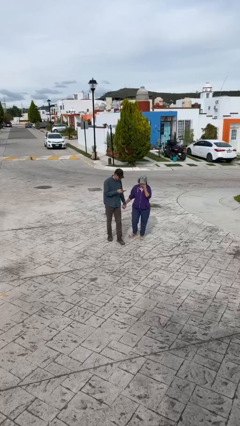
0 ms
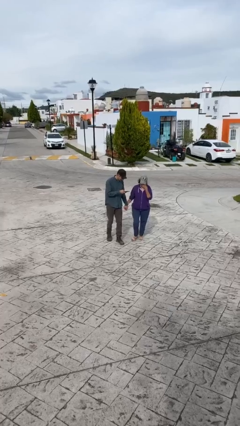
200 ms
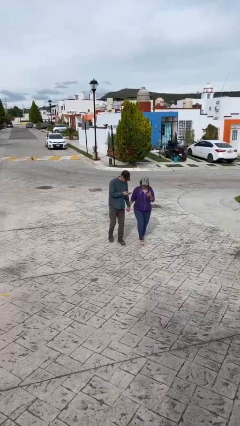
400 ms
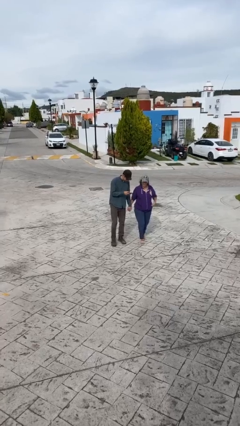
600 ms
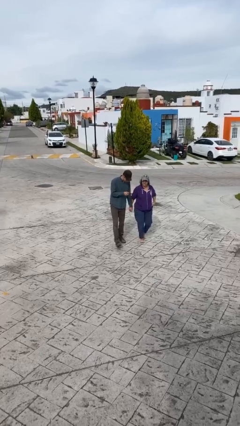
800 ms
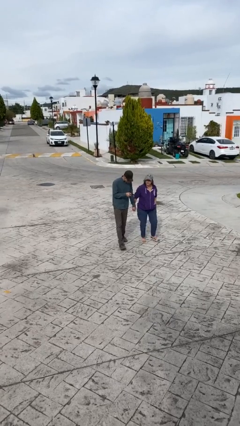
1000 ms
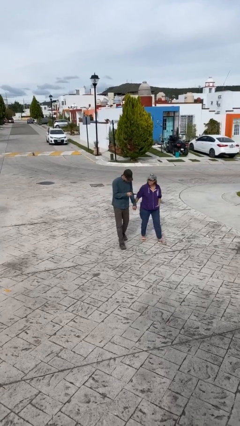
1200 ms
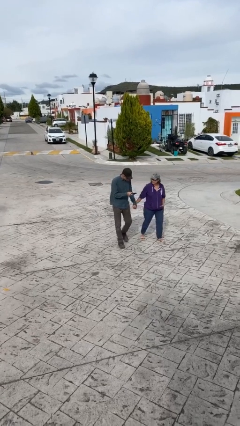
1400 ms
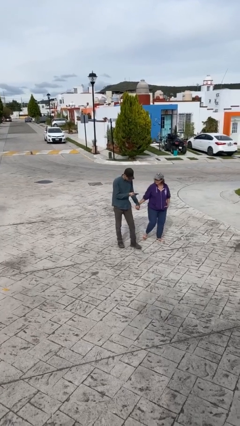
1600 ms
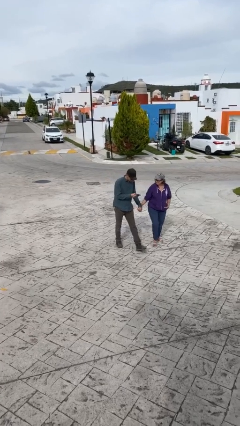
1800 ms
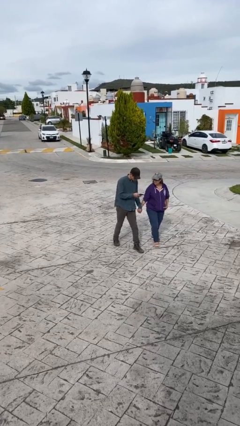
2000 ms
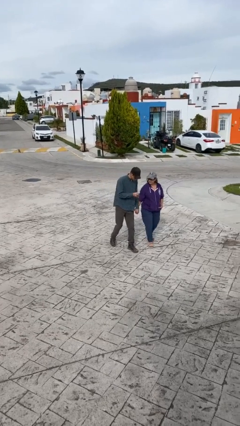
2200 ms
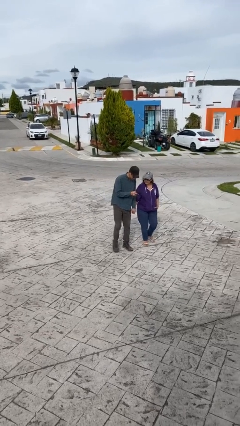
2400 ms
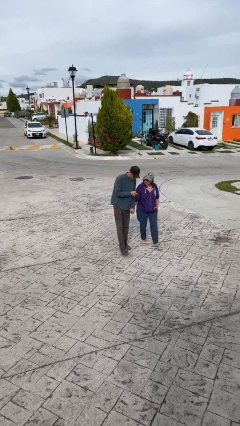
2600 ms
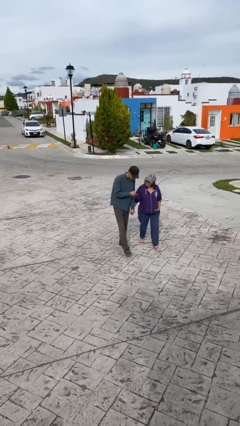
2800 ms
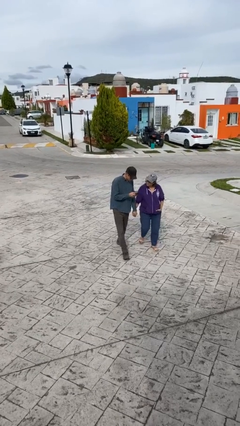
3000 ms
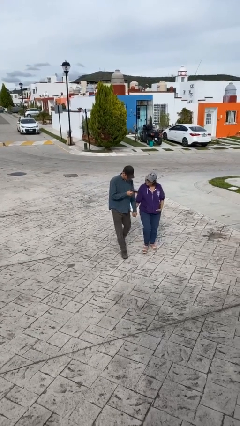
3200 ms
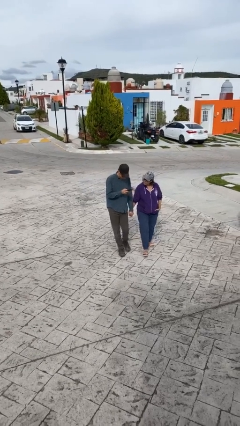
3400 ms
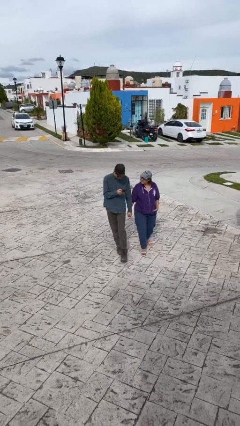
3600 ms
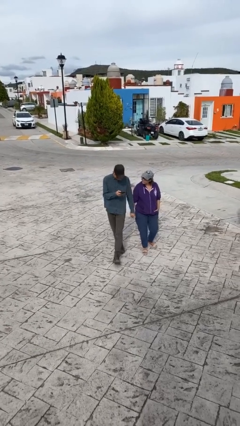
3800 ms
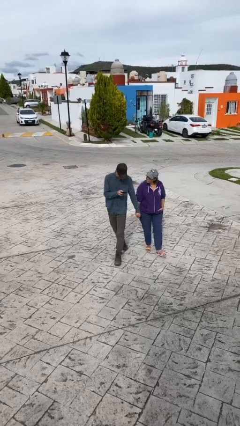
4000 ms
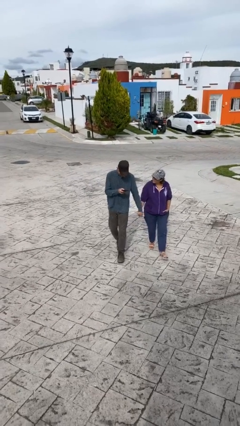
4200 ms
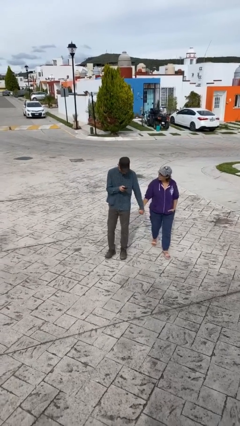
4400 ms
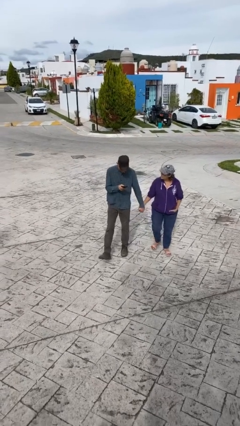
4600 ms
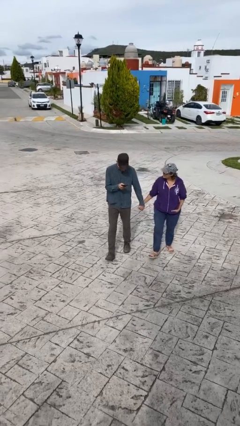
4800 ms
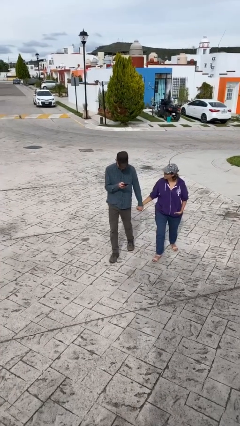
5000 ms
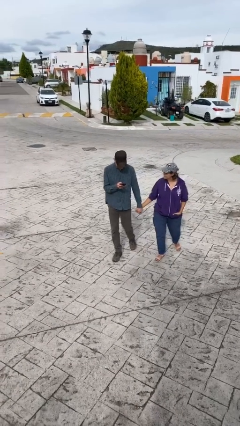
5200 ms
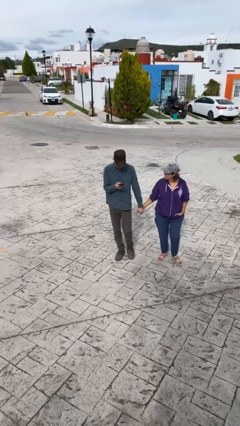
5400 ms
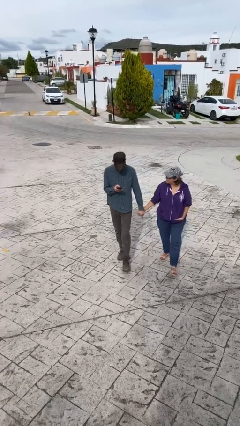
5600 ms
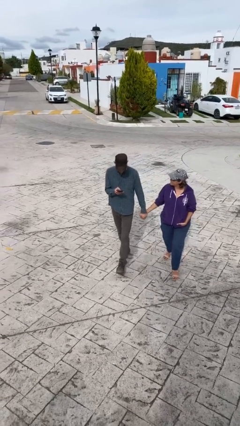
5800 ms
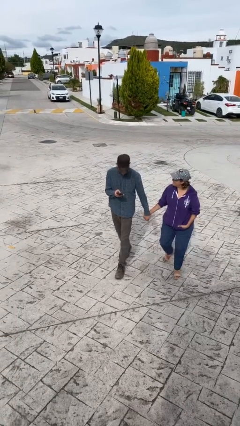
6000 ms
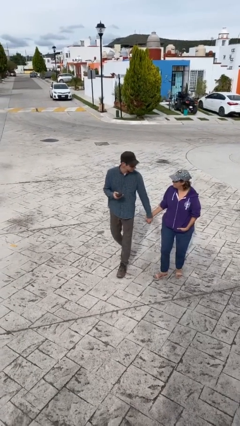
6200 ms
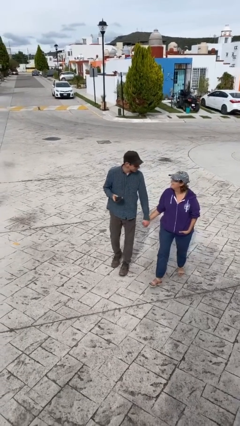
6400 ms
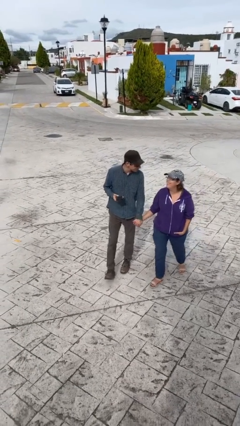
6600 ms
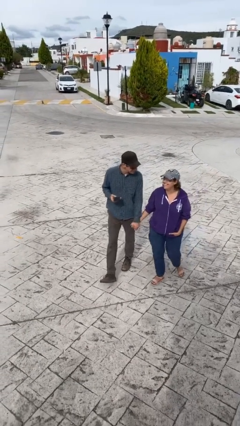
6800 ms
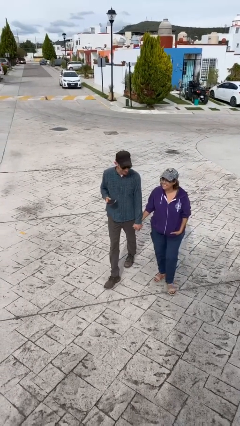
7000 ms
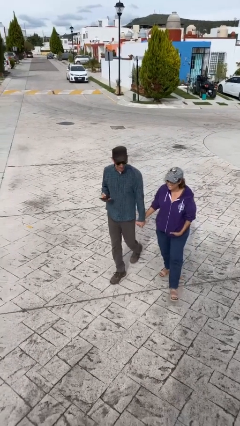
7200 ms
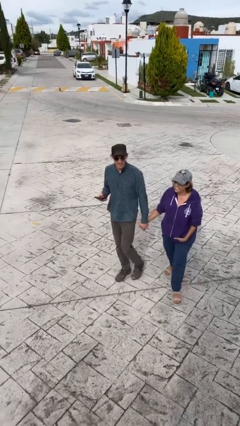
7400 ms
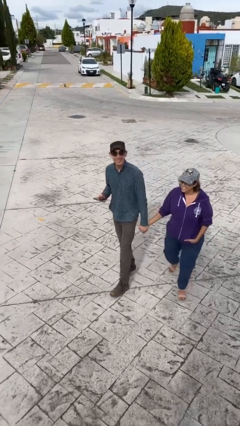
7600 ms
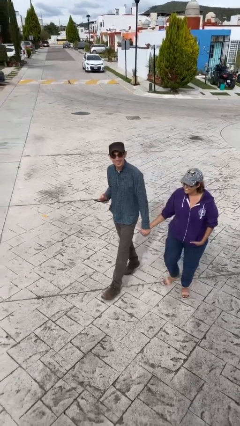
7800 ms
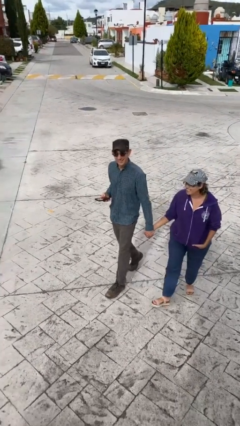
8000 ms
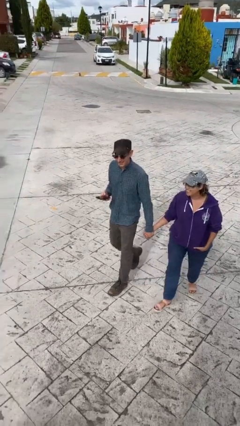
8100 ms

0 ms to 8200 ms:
person holds hand

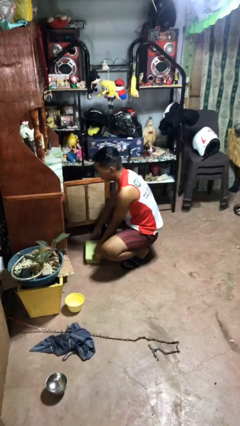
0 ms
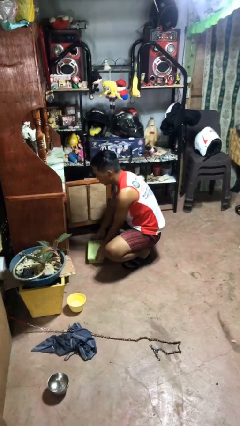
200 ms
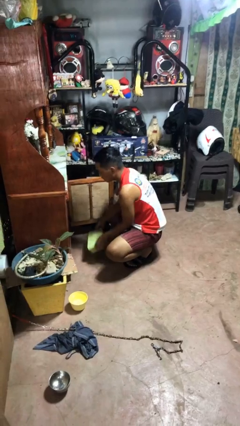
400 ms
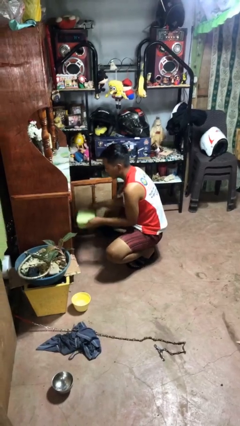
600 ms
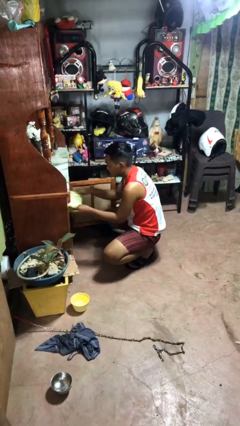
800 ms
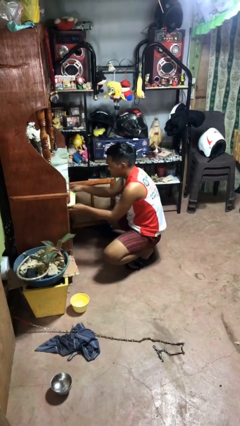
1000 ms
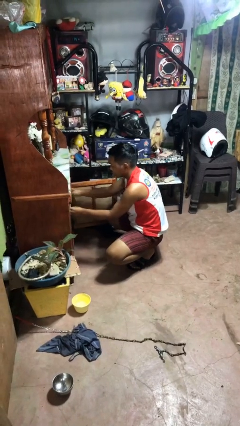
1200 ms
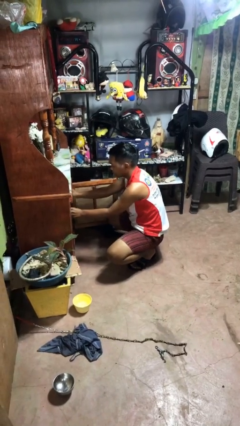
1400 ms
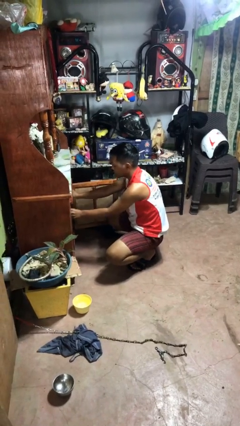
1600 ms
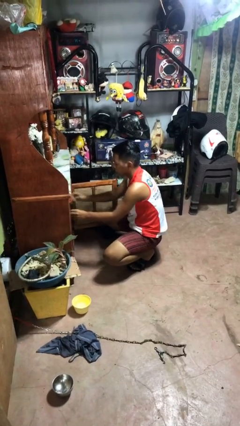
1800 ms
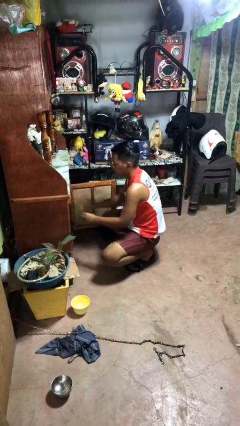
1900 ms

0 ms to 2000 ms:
person puts object in cabinet

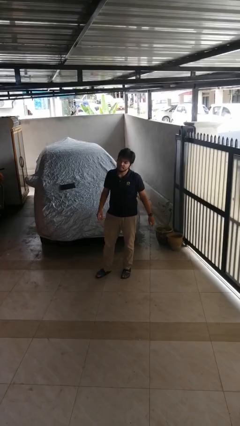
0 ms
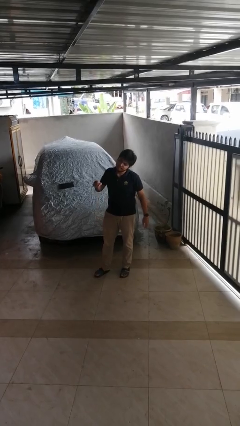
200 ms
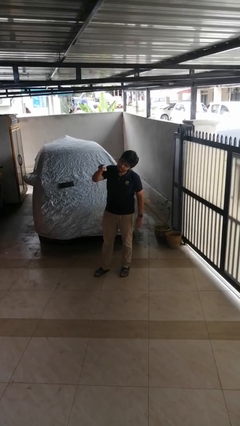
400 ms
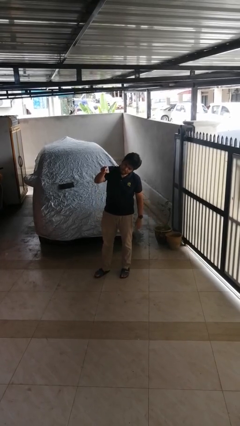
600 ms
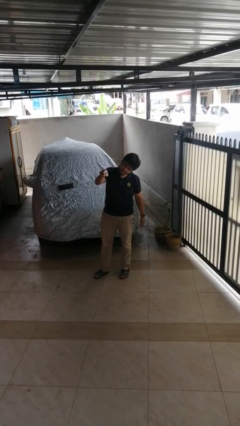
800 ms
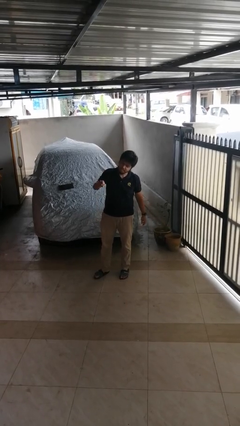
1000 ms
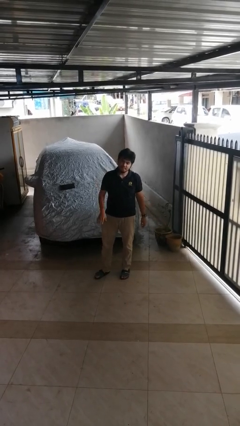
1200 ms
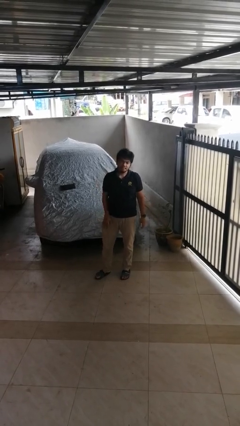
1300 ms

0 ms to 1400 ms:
person points at person

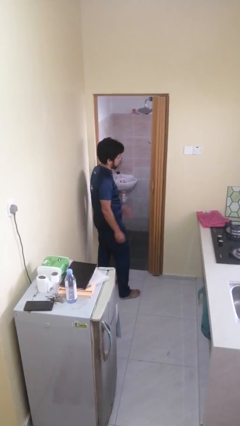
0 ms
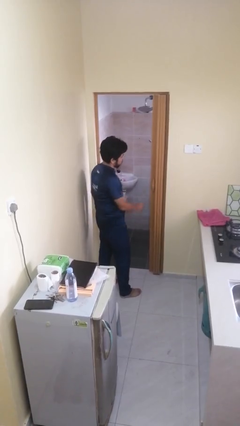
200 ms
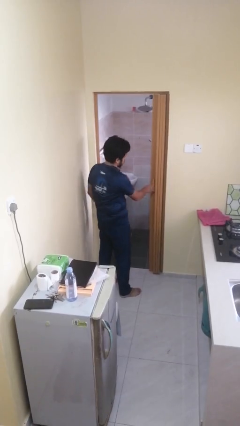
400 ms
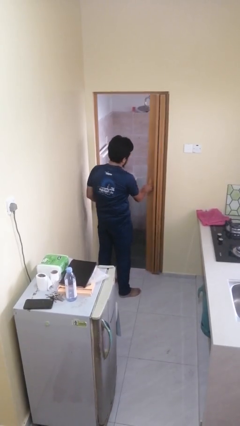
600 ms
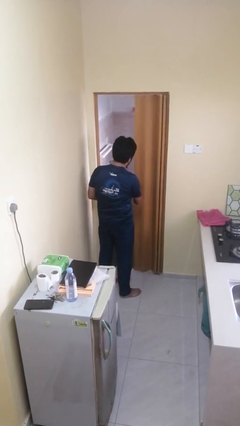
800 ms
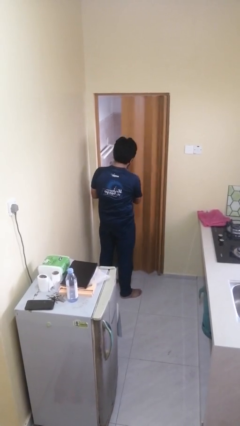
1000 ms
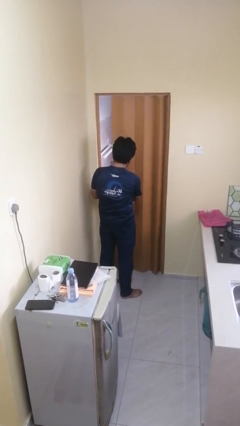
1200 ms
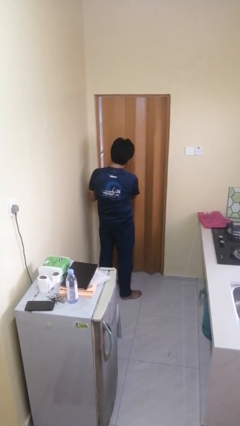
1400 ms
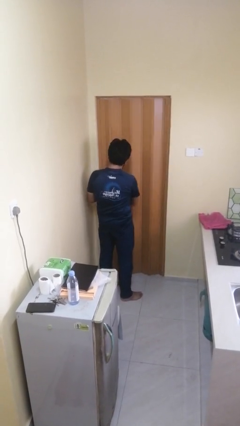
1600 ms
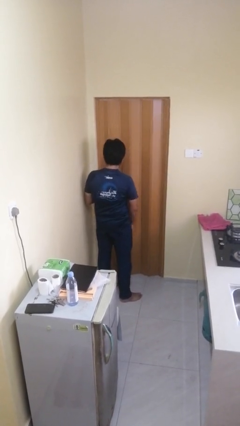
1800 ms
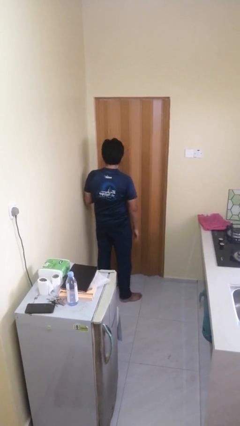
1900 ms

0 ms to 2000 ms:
person closes sliding door

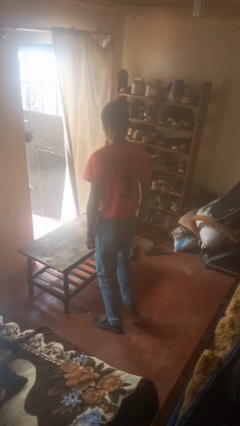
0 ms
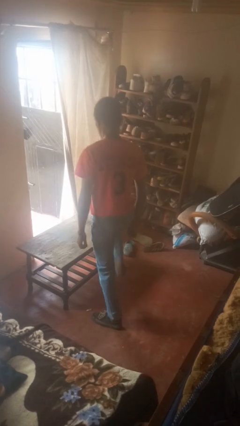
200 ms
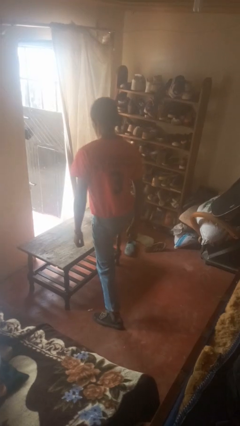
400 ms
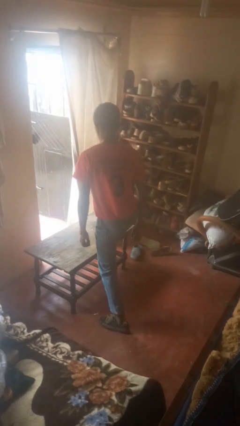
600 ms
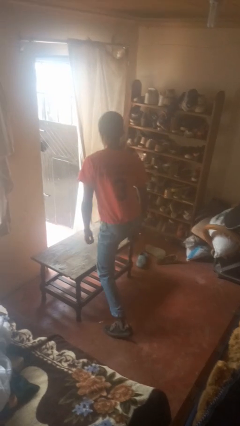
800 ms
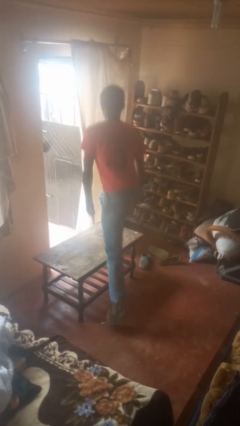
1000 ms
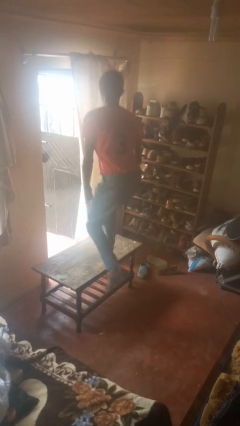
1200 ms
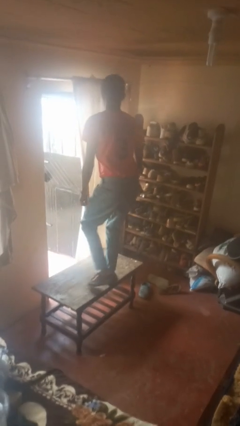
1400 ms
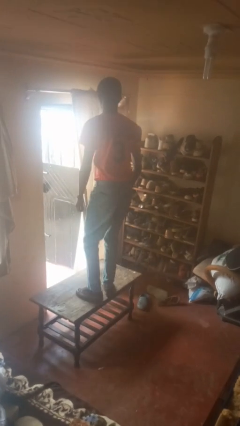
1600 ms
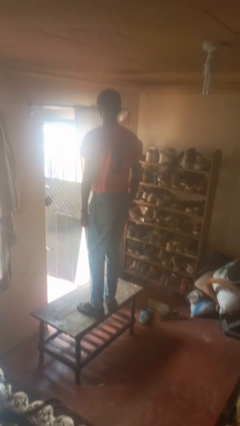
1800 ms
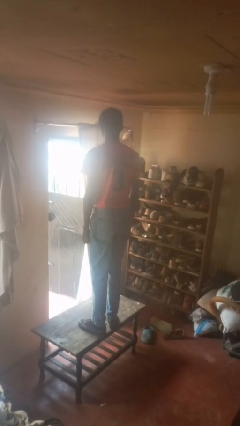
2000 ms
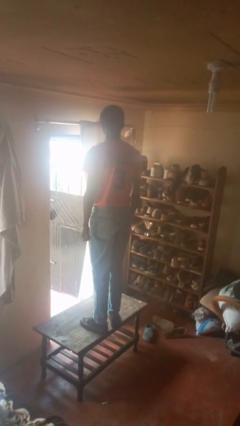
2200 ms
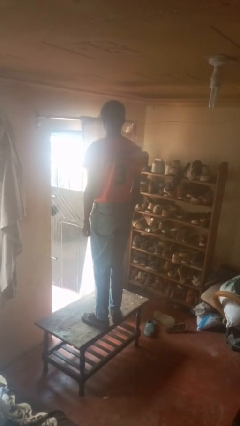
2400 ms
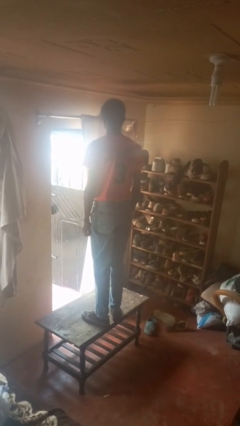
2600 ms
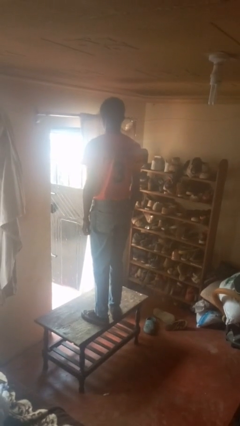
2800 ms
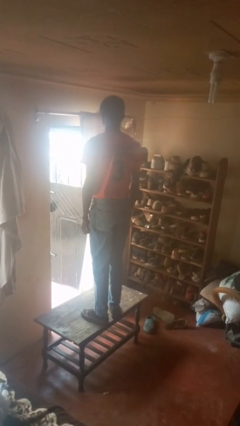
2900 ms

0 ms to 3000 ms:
person climbs on table

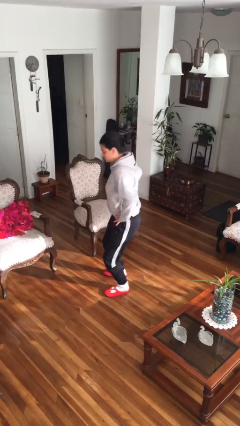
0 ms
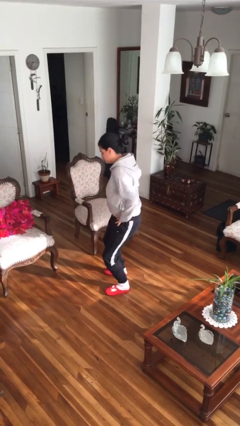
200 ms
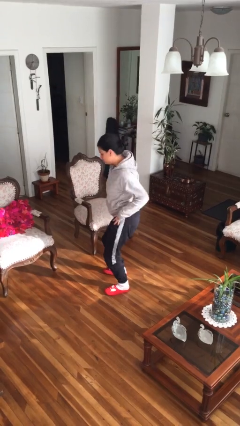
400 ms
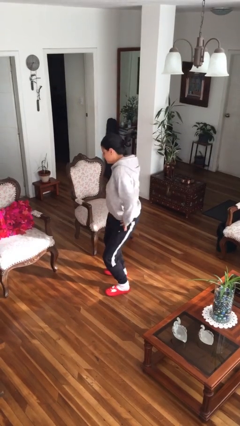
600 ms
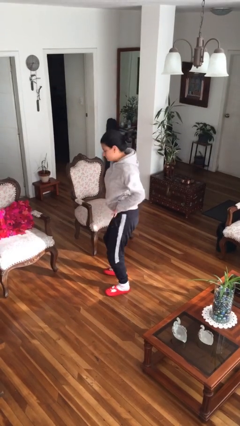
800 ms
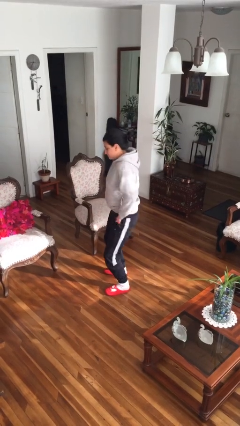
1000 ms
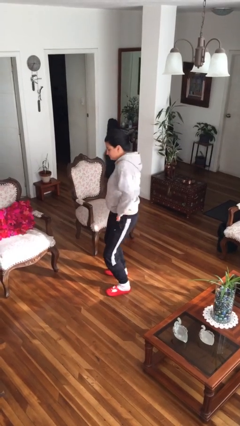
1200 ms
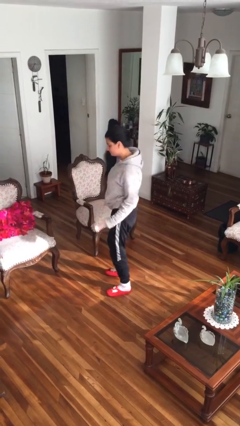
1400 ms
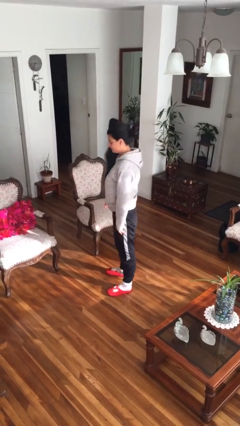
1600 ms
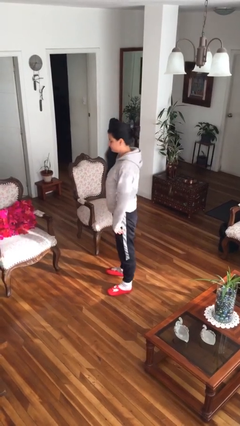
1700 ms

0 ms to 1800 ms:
person dances in place
